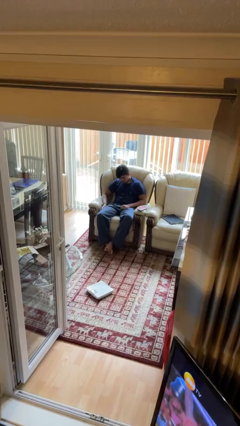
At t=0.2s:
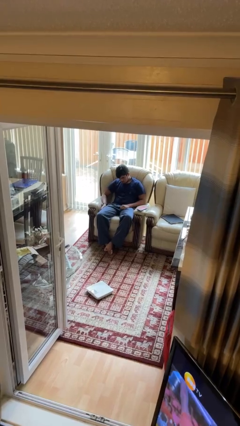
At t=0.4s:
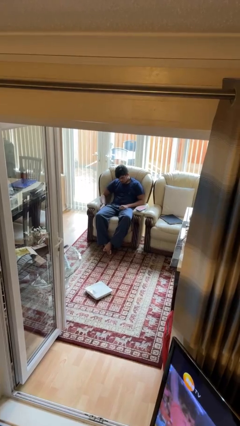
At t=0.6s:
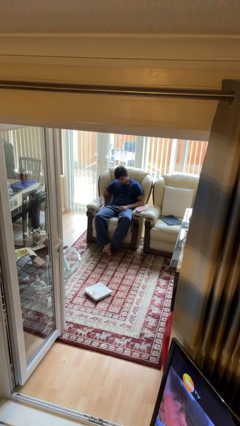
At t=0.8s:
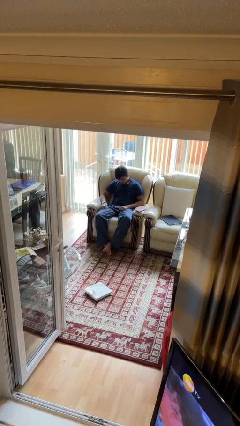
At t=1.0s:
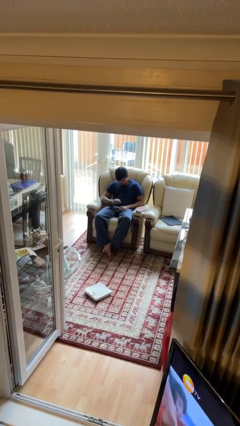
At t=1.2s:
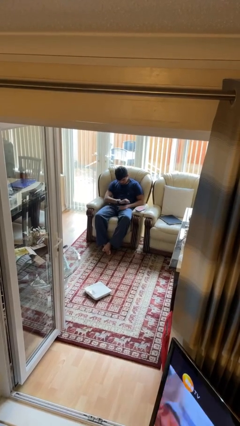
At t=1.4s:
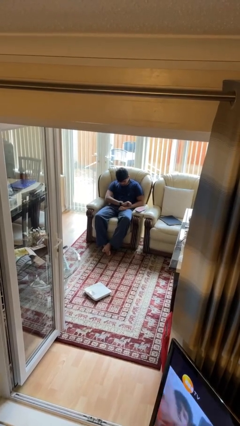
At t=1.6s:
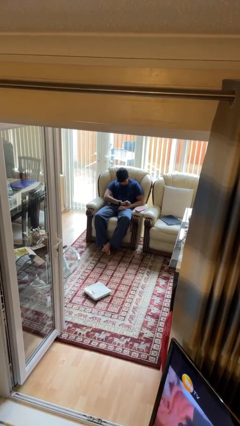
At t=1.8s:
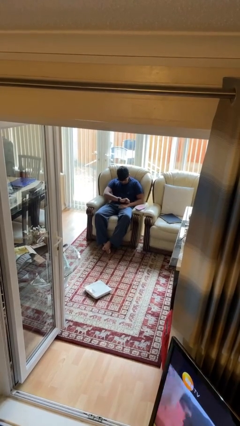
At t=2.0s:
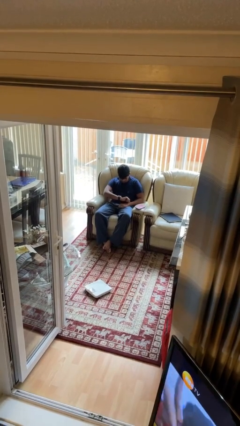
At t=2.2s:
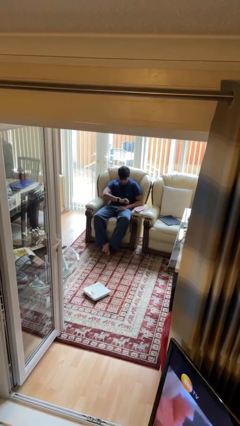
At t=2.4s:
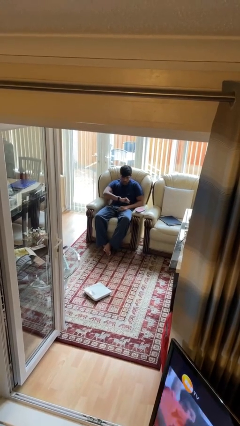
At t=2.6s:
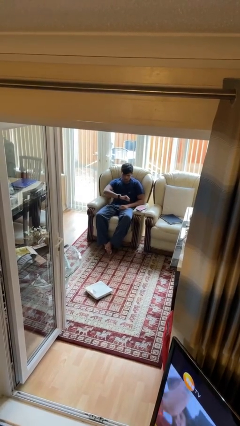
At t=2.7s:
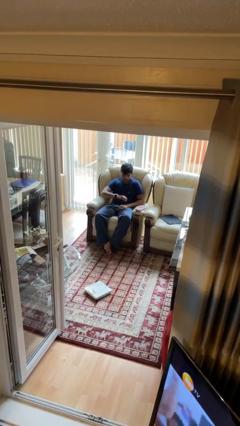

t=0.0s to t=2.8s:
person looks at wristwatch

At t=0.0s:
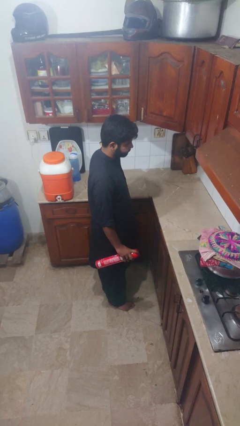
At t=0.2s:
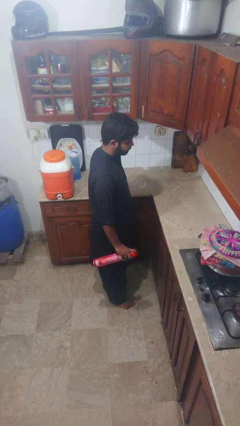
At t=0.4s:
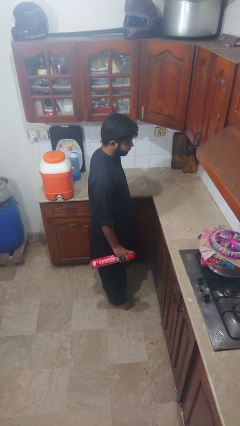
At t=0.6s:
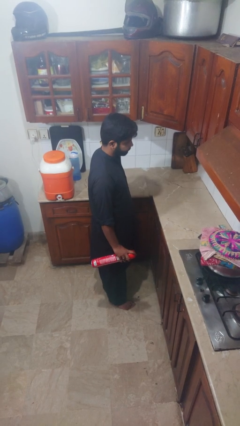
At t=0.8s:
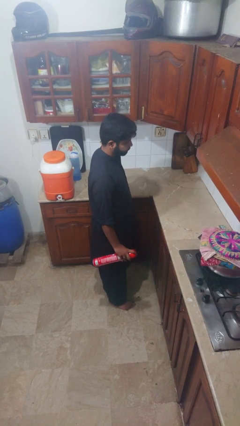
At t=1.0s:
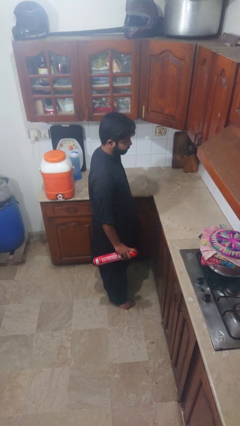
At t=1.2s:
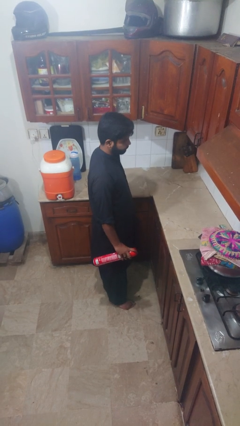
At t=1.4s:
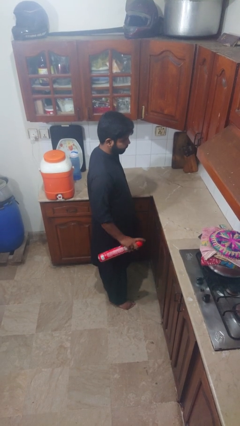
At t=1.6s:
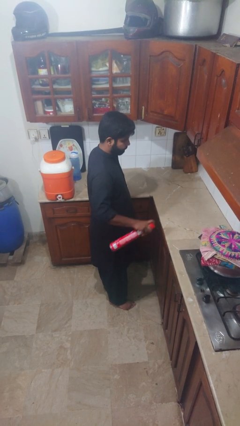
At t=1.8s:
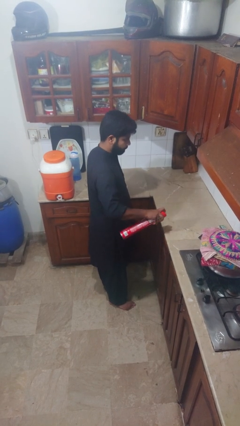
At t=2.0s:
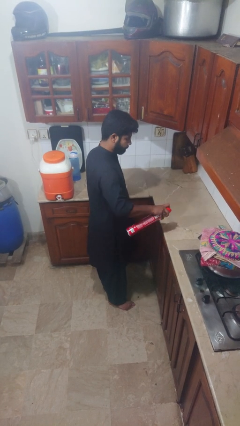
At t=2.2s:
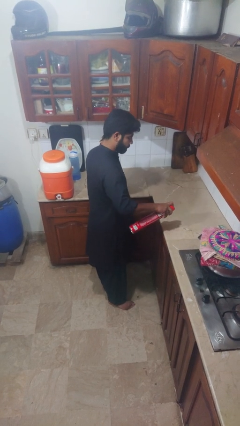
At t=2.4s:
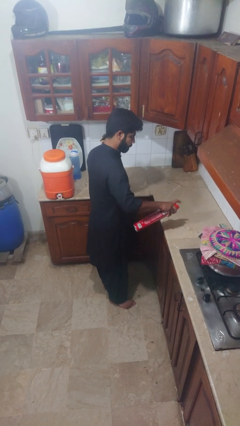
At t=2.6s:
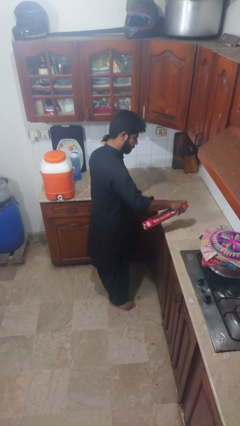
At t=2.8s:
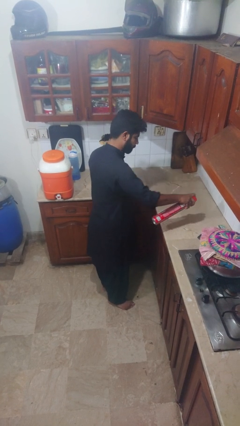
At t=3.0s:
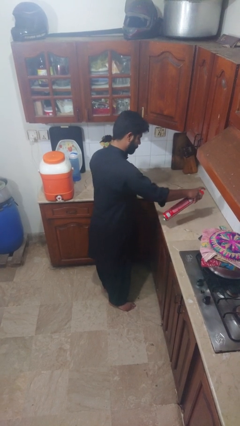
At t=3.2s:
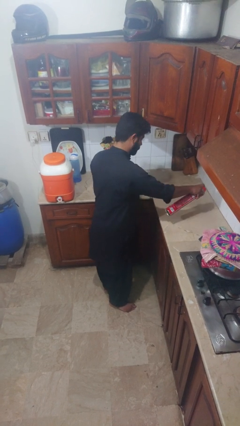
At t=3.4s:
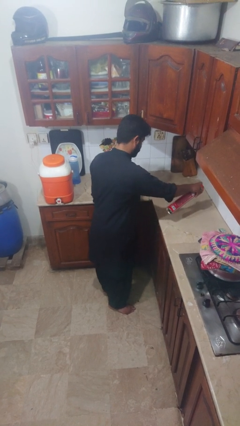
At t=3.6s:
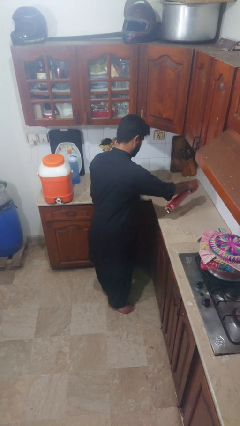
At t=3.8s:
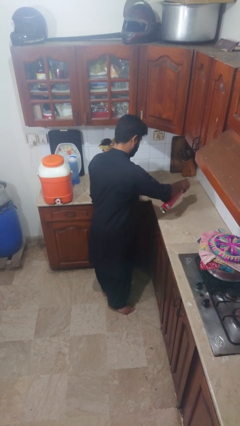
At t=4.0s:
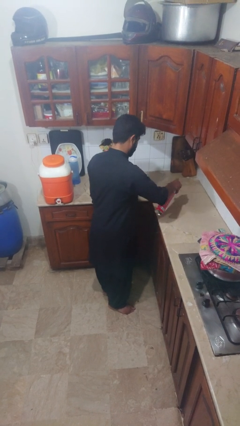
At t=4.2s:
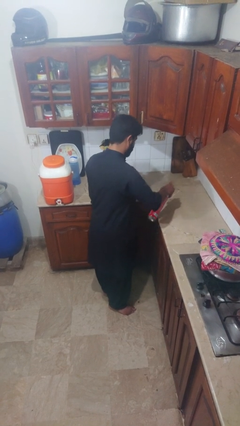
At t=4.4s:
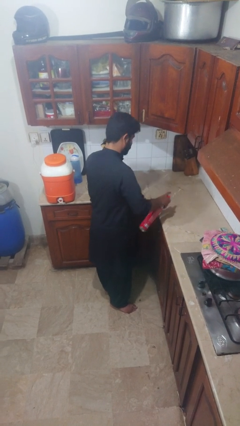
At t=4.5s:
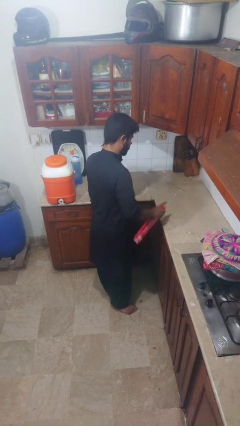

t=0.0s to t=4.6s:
person sprays from bottle

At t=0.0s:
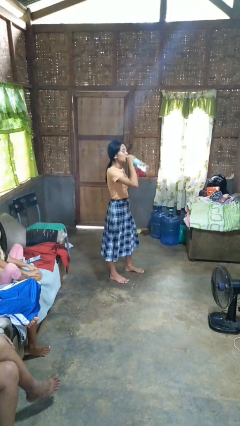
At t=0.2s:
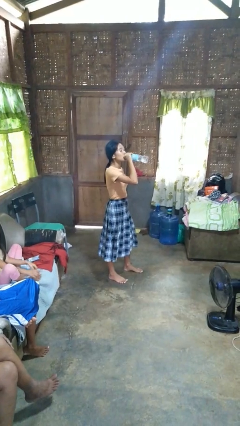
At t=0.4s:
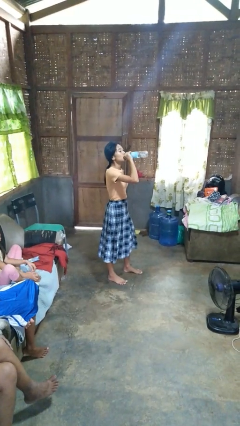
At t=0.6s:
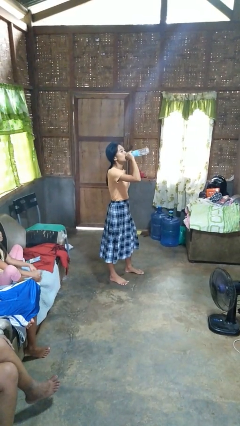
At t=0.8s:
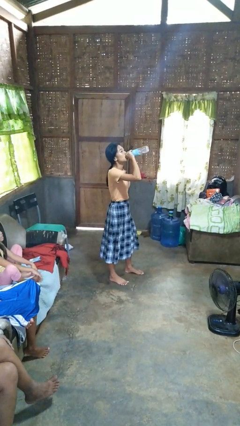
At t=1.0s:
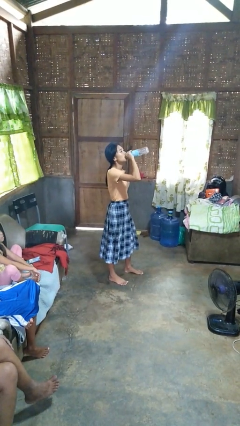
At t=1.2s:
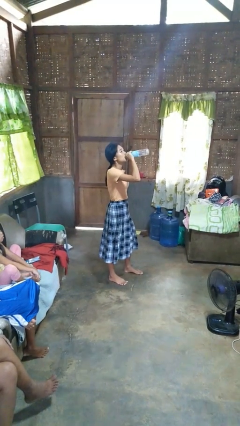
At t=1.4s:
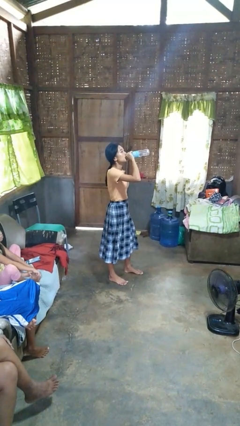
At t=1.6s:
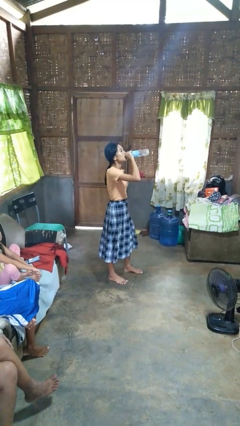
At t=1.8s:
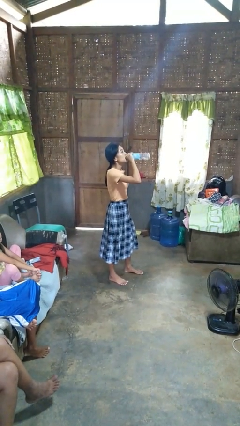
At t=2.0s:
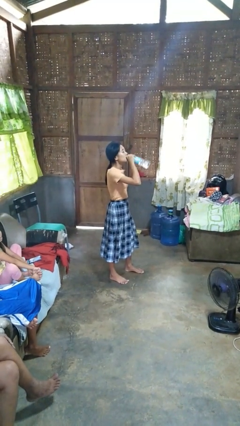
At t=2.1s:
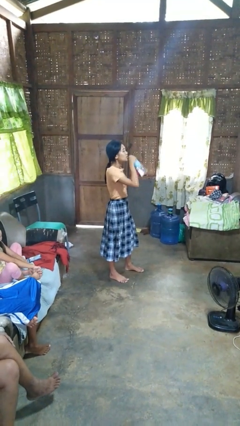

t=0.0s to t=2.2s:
person drinks from bottle

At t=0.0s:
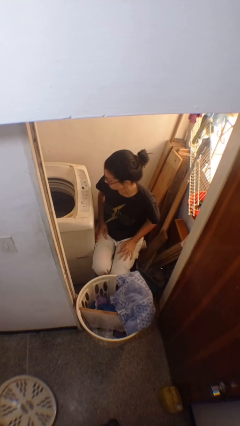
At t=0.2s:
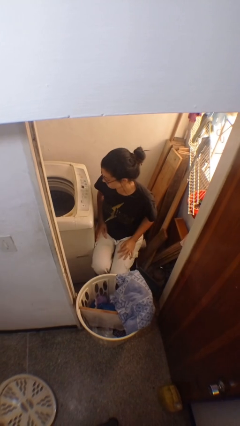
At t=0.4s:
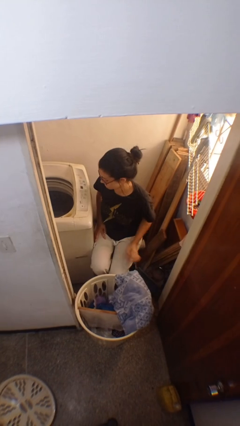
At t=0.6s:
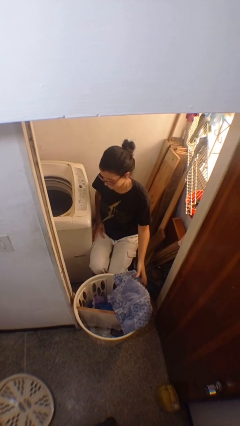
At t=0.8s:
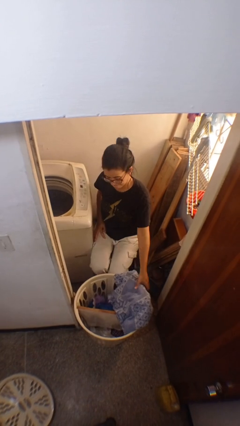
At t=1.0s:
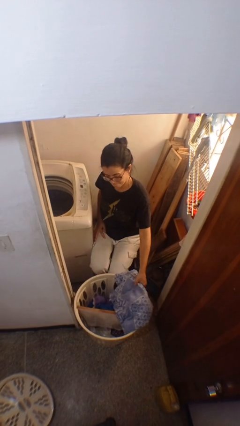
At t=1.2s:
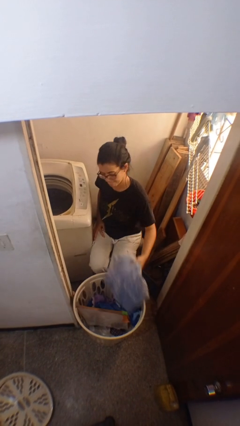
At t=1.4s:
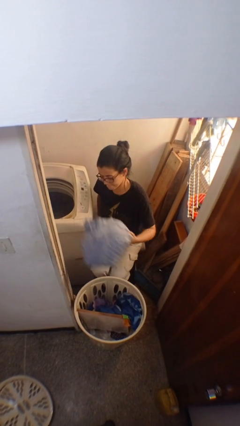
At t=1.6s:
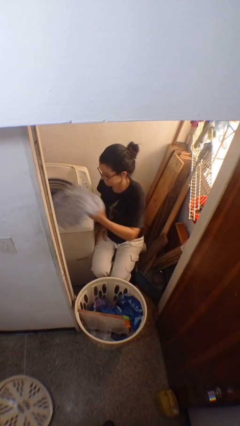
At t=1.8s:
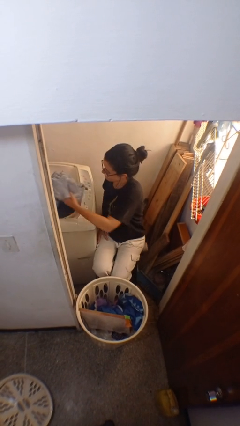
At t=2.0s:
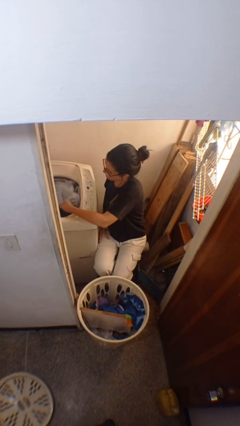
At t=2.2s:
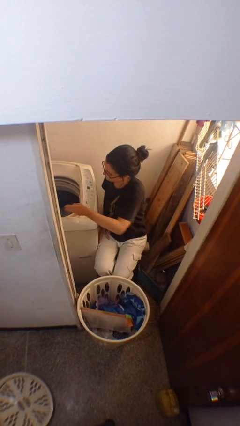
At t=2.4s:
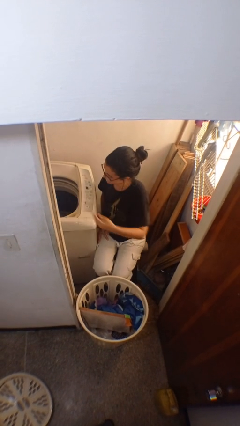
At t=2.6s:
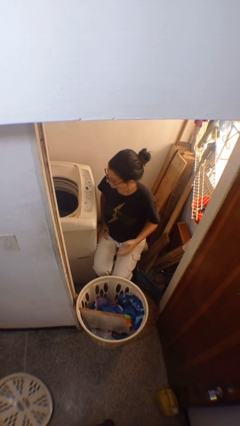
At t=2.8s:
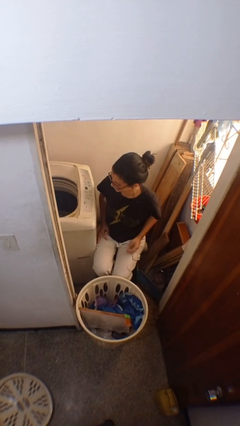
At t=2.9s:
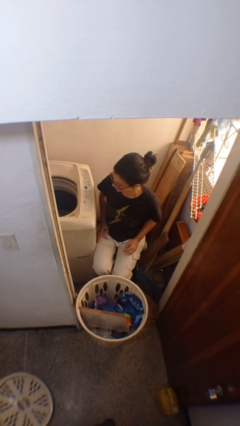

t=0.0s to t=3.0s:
person loads clotheswasher

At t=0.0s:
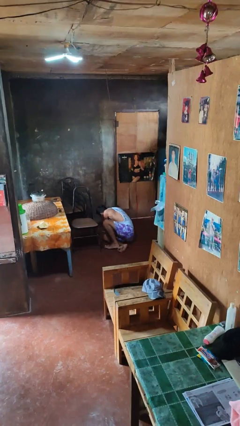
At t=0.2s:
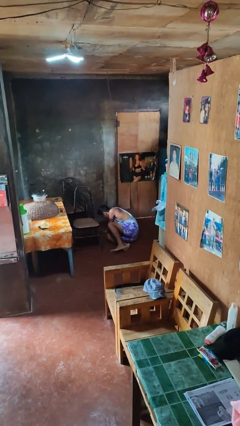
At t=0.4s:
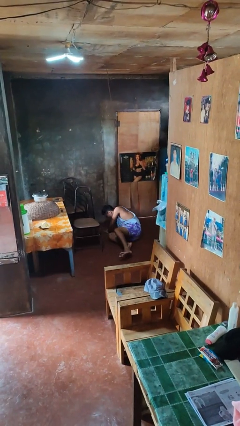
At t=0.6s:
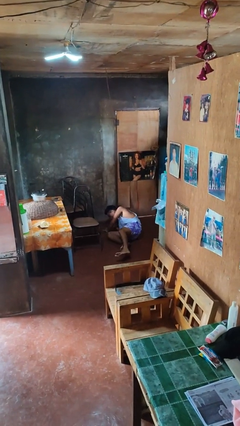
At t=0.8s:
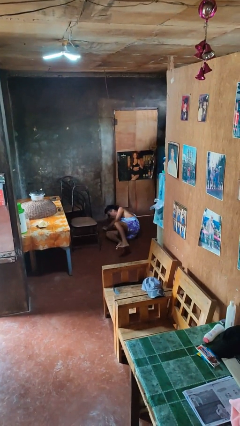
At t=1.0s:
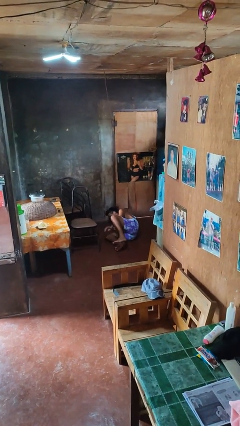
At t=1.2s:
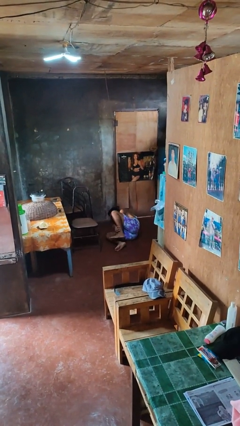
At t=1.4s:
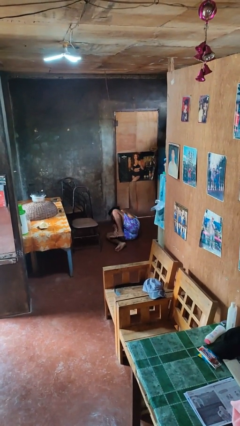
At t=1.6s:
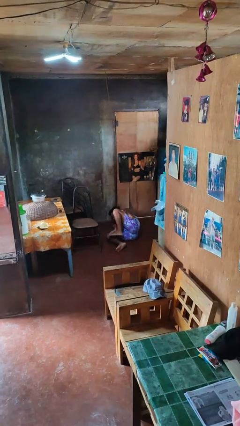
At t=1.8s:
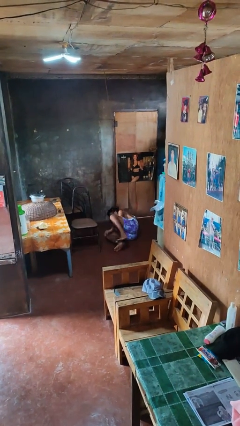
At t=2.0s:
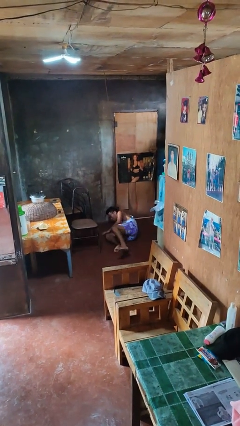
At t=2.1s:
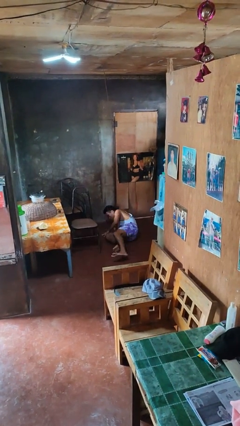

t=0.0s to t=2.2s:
person lies down on floor

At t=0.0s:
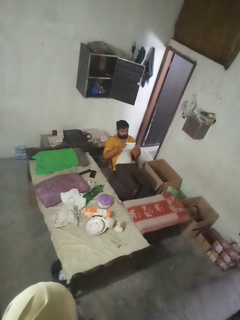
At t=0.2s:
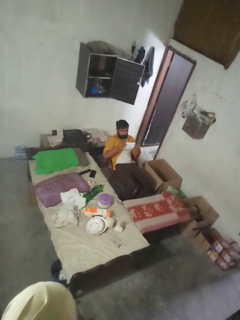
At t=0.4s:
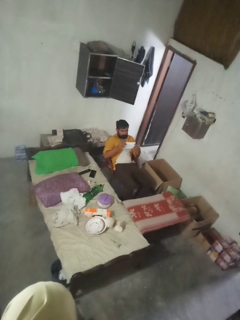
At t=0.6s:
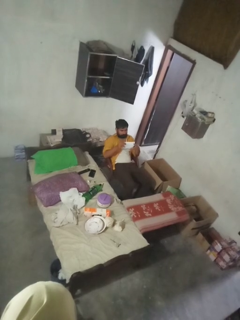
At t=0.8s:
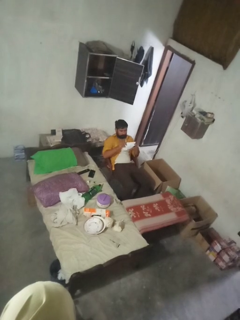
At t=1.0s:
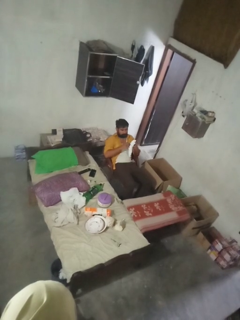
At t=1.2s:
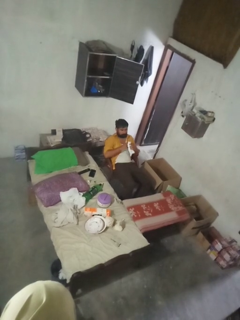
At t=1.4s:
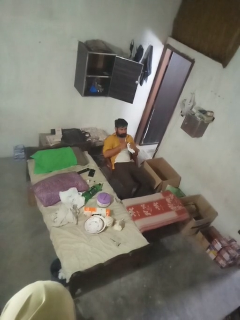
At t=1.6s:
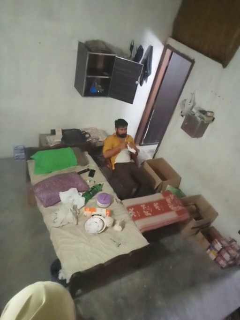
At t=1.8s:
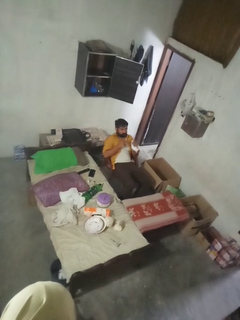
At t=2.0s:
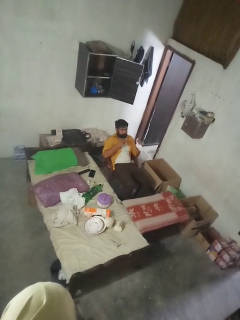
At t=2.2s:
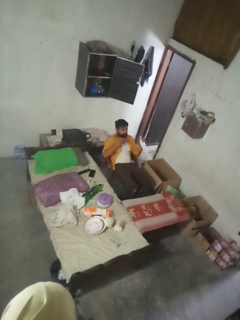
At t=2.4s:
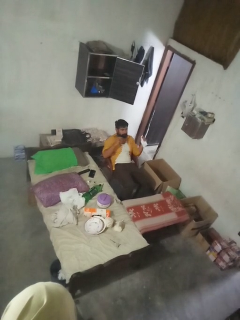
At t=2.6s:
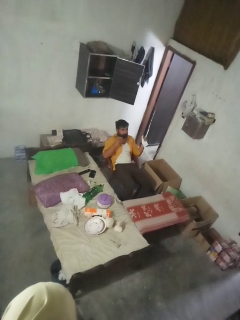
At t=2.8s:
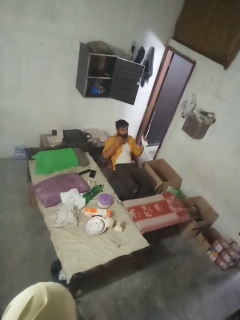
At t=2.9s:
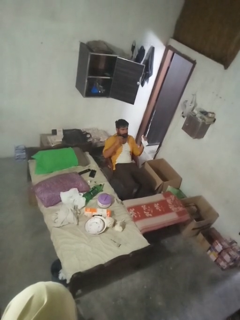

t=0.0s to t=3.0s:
person crumples paper

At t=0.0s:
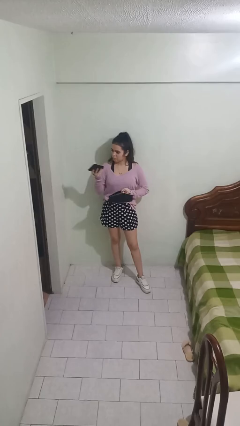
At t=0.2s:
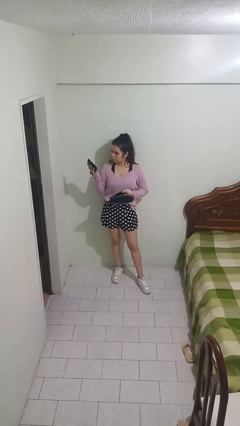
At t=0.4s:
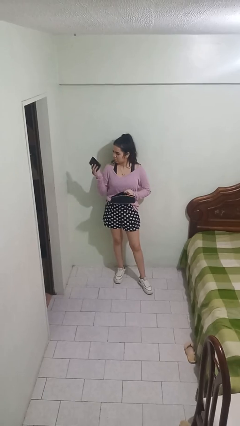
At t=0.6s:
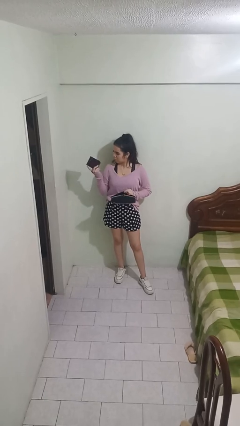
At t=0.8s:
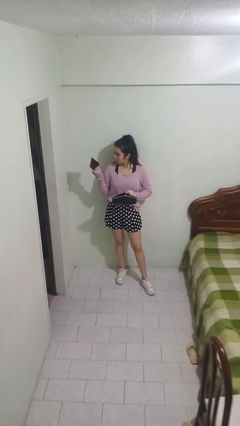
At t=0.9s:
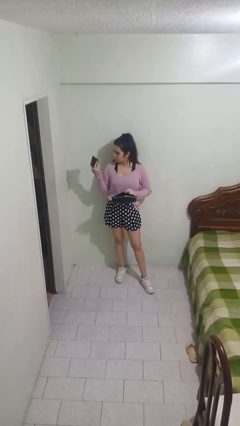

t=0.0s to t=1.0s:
person takes object from purse
